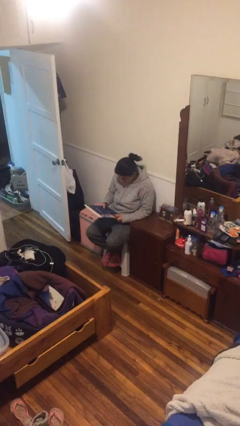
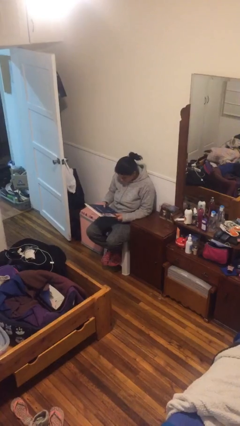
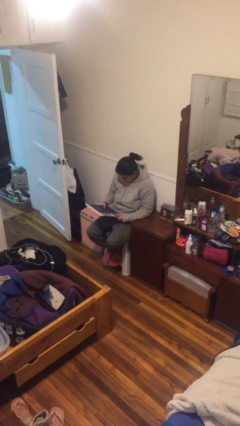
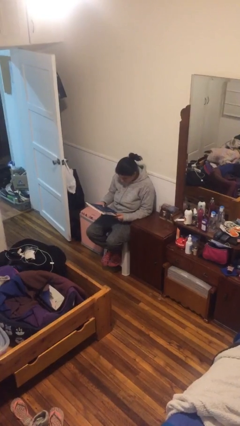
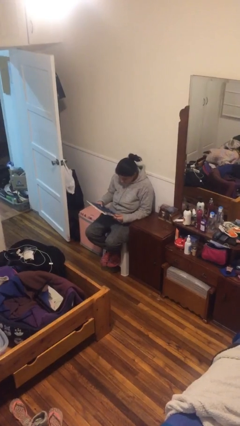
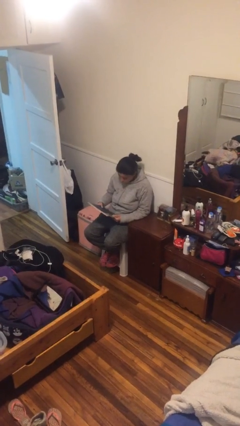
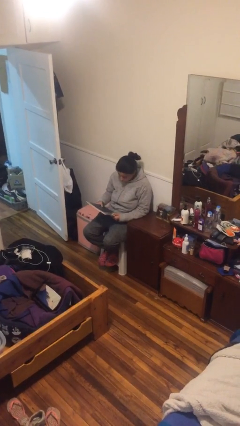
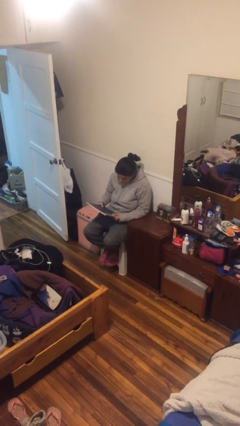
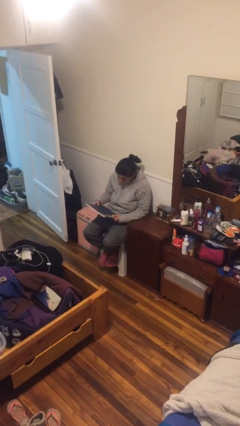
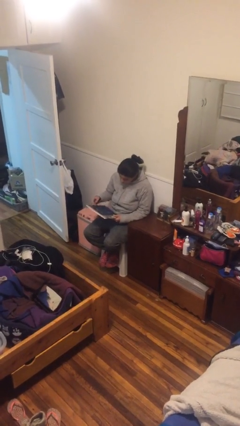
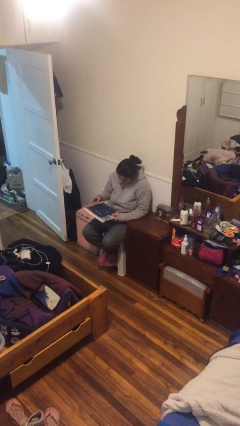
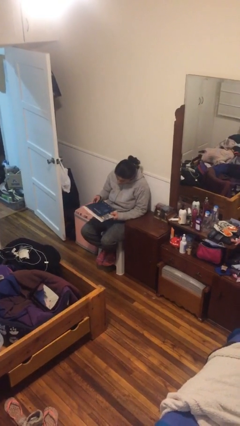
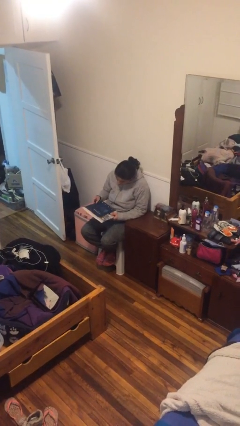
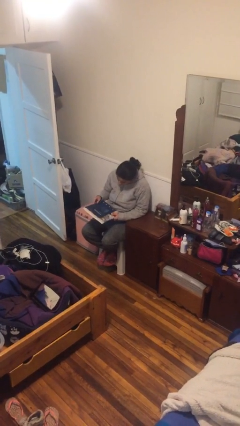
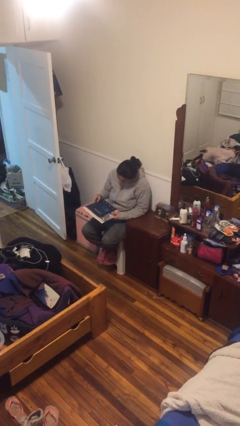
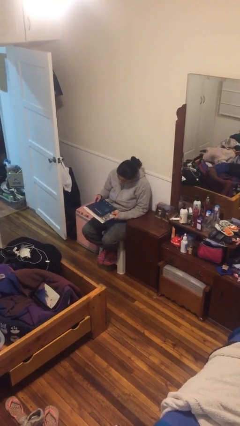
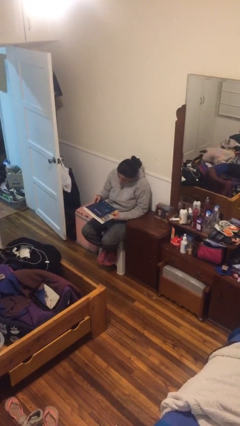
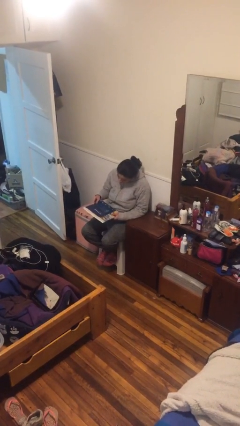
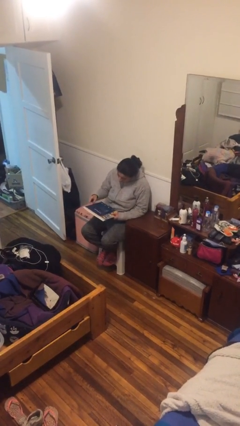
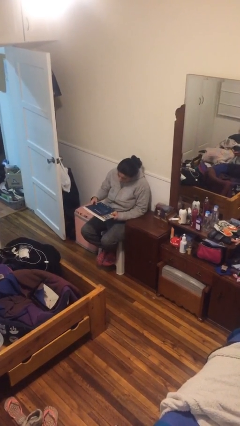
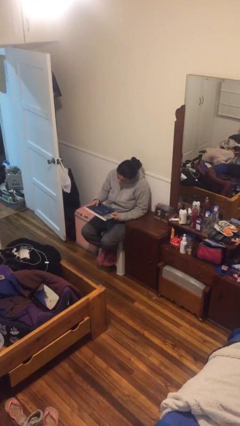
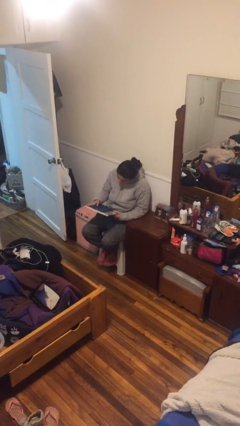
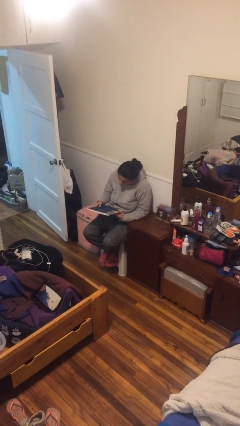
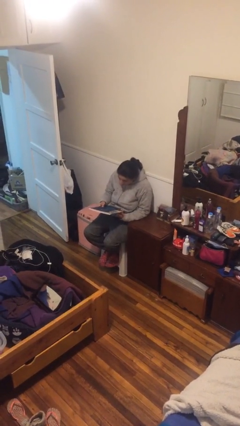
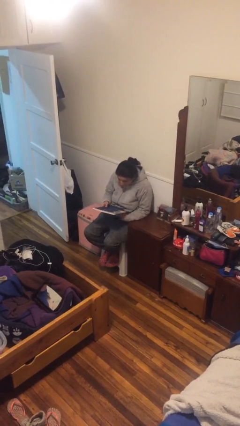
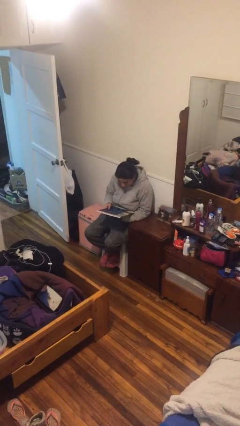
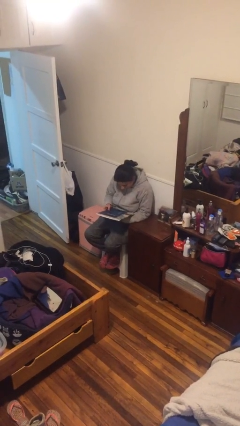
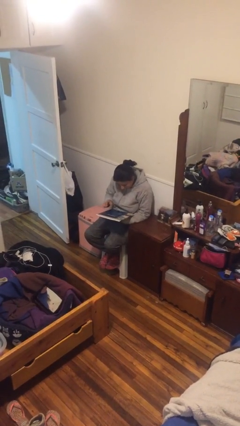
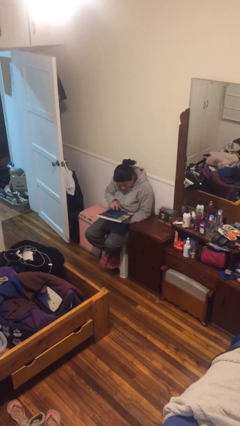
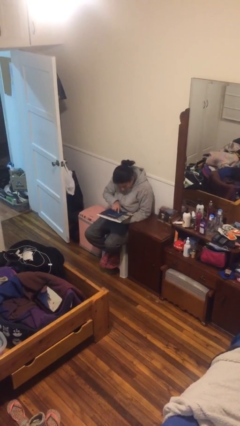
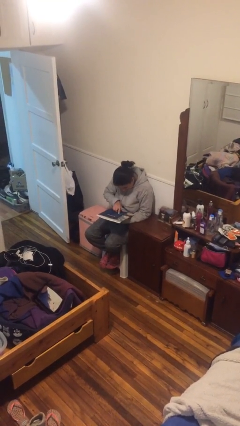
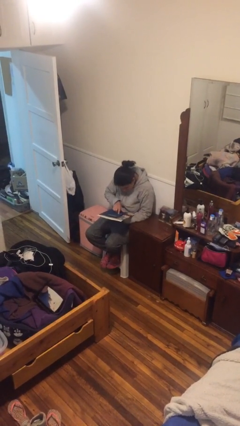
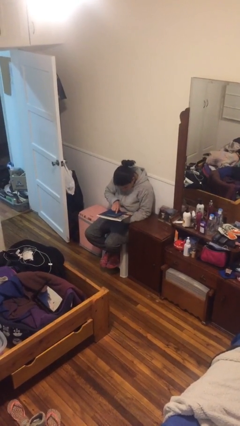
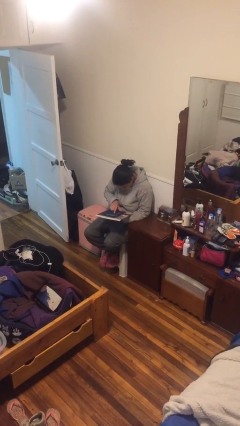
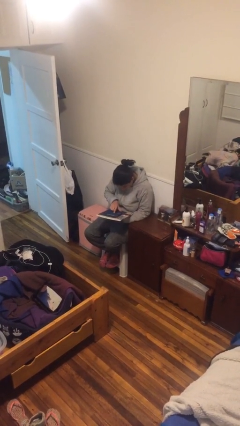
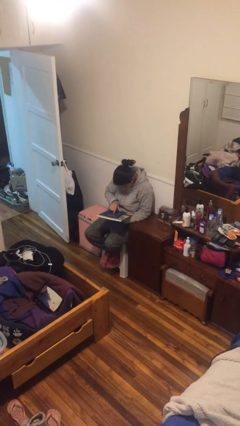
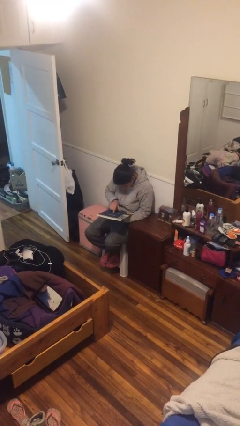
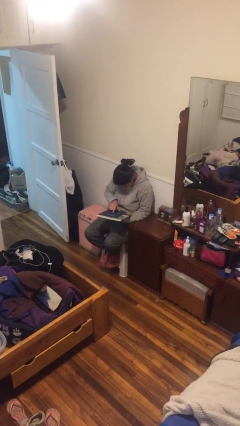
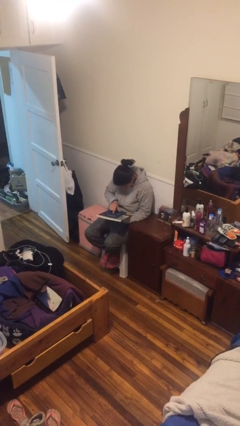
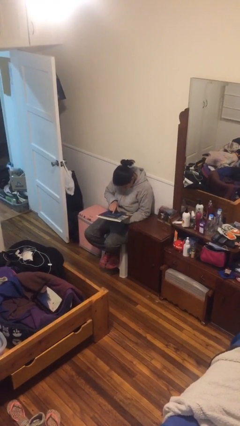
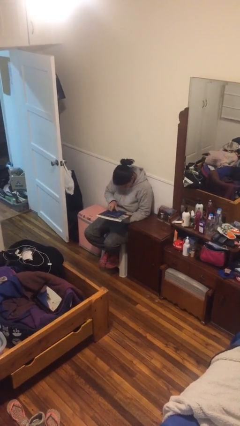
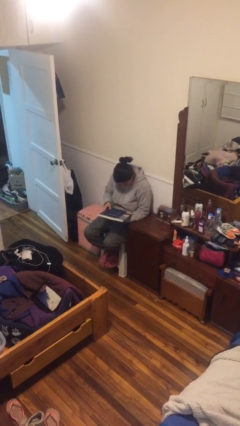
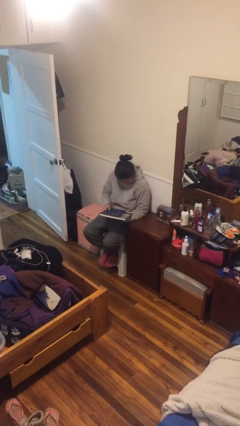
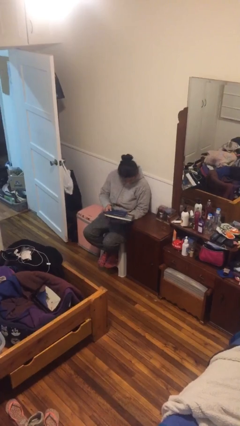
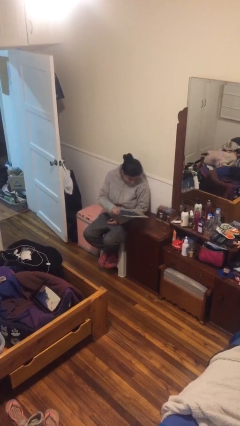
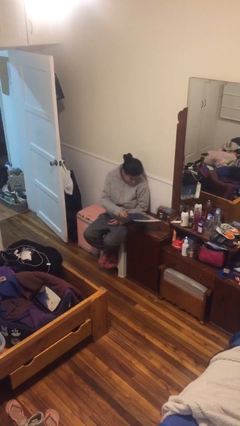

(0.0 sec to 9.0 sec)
person reads document

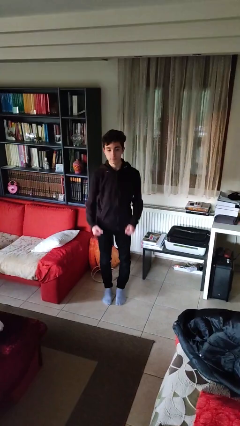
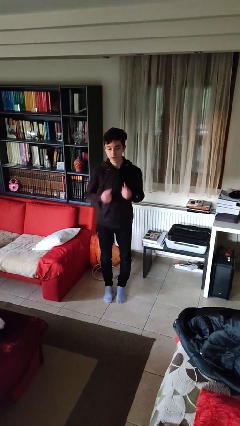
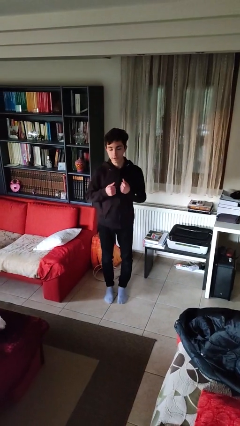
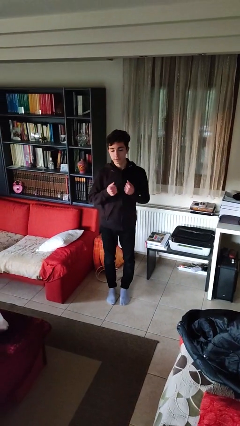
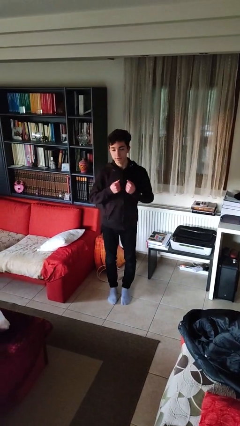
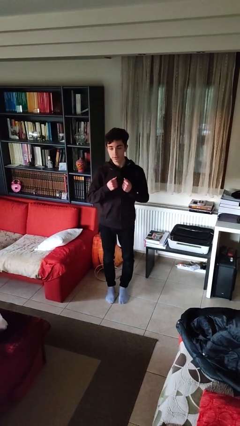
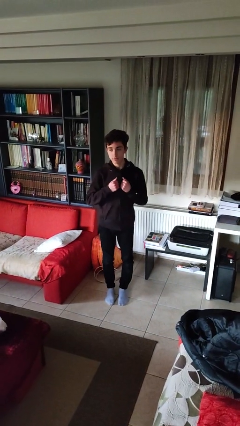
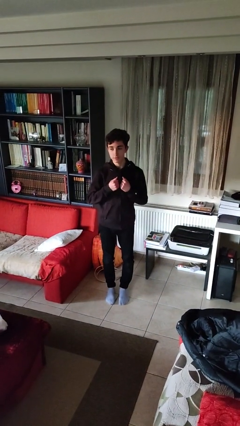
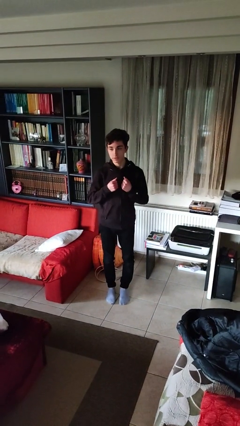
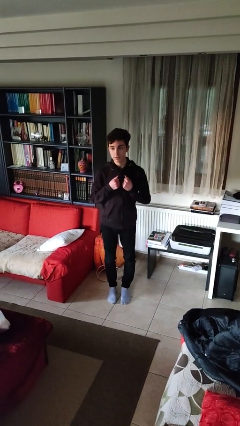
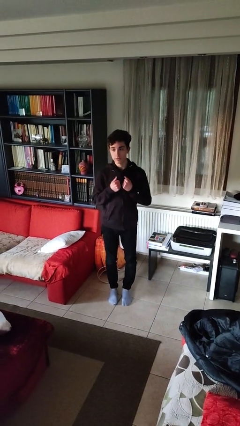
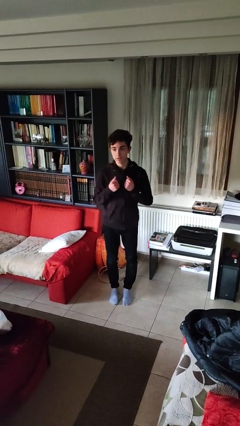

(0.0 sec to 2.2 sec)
person drums on chest

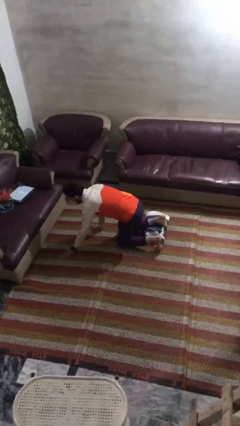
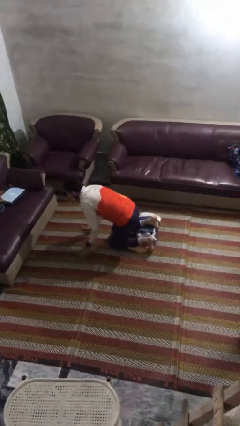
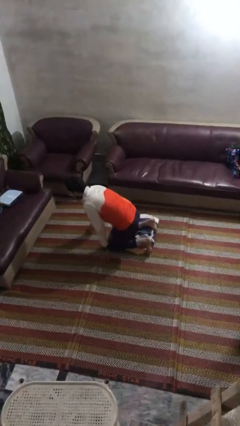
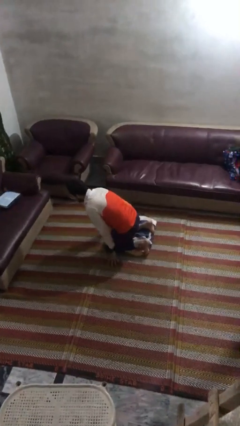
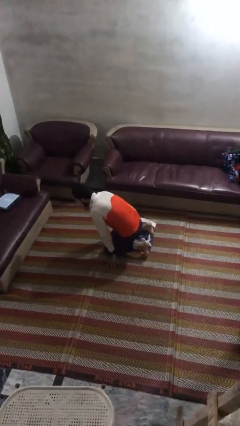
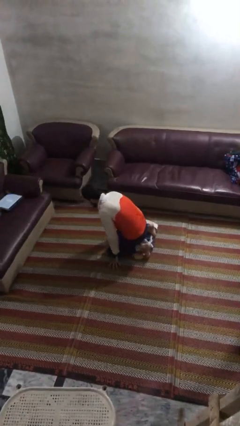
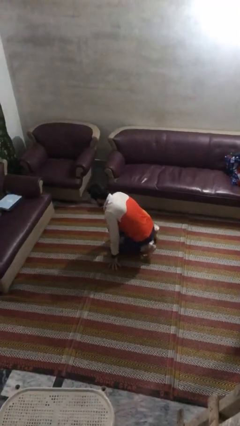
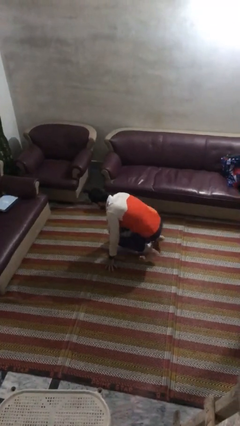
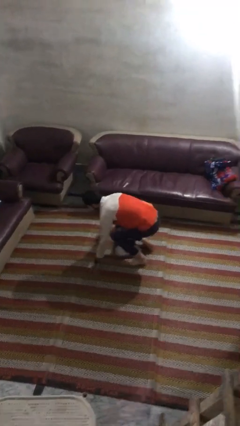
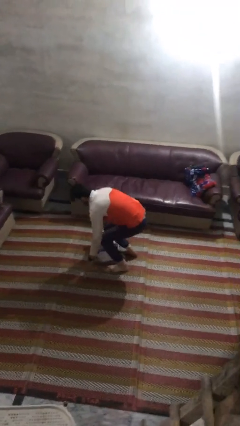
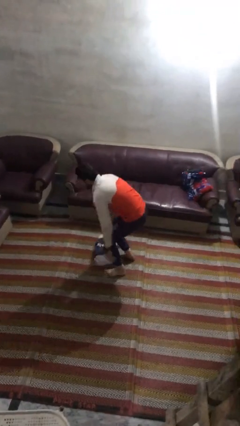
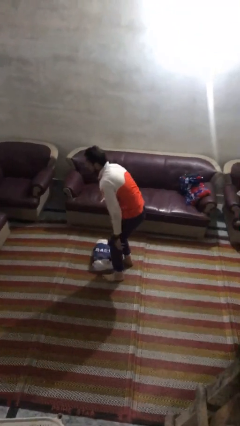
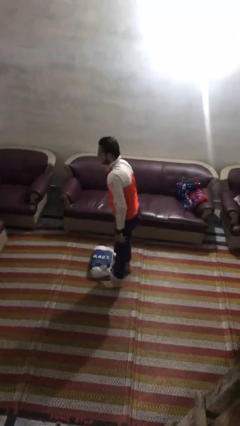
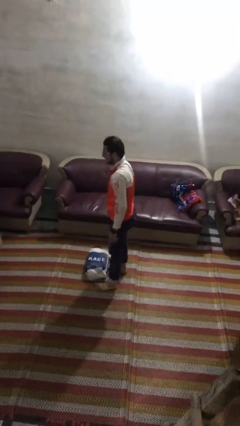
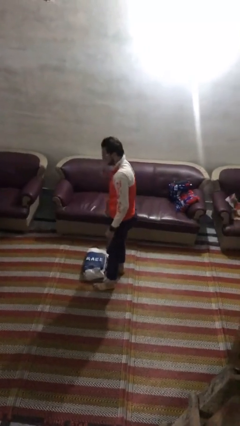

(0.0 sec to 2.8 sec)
person stands up from floor

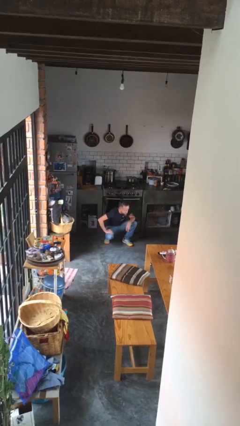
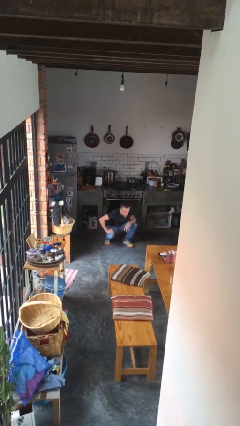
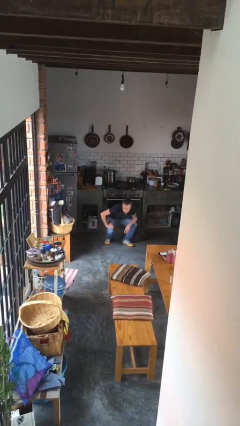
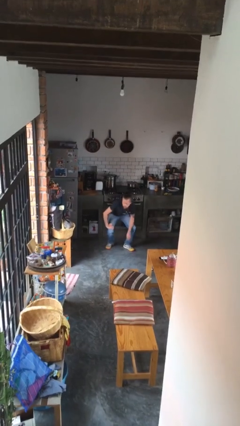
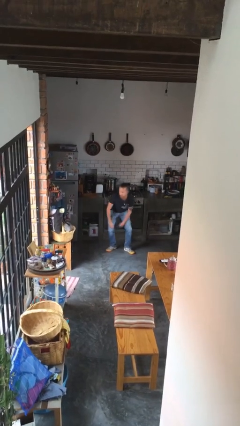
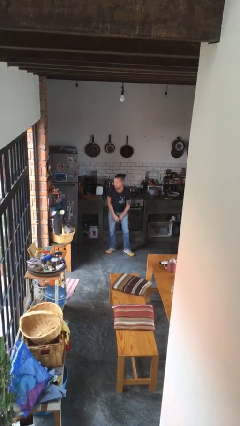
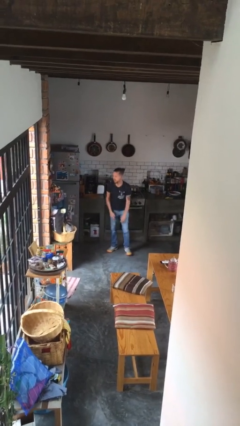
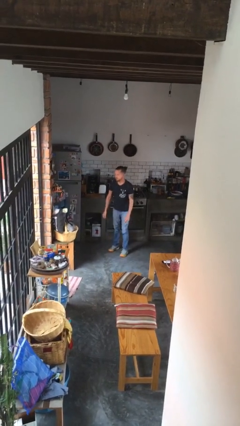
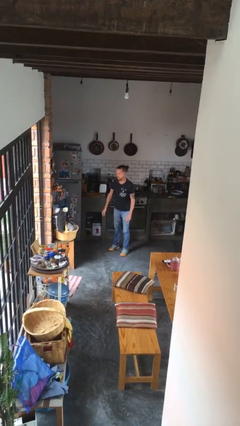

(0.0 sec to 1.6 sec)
person stands up

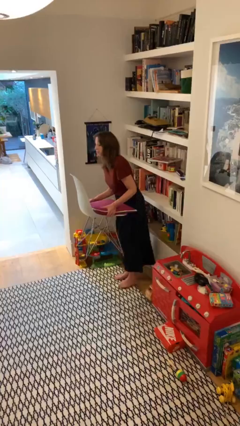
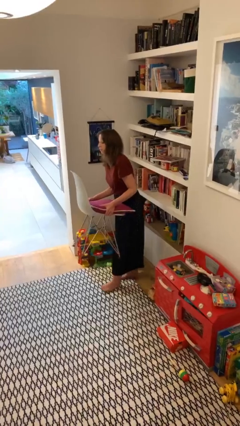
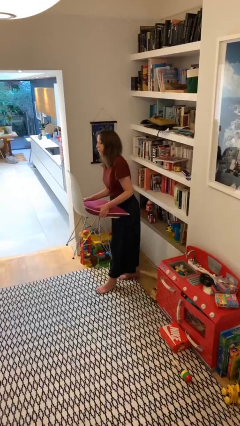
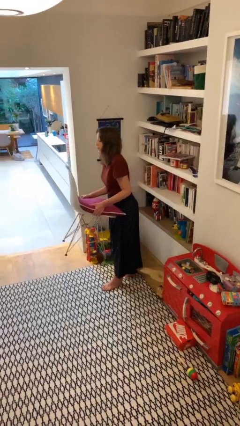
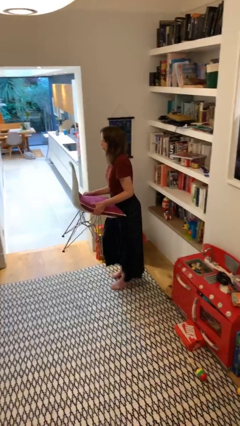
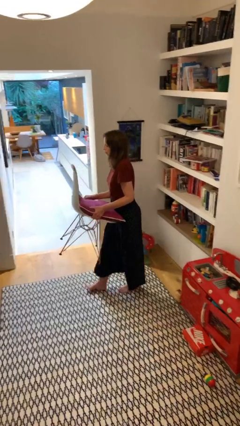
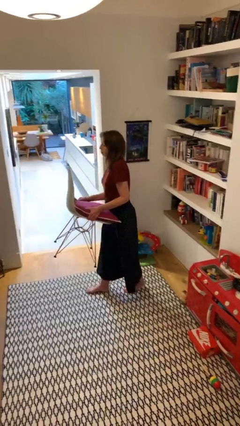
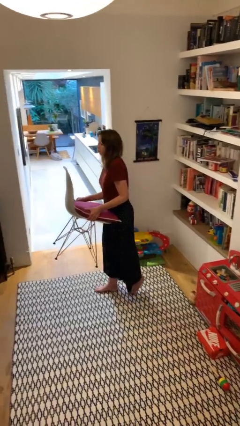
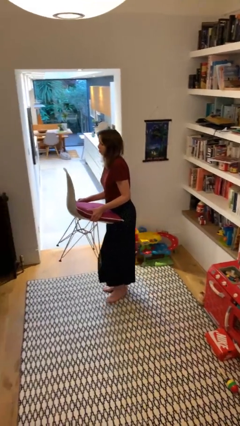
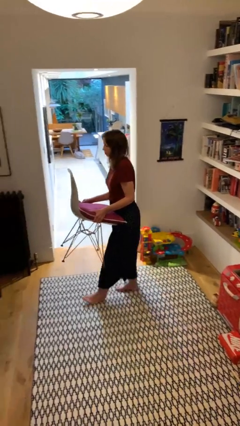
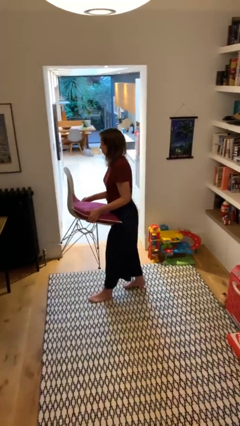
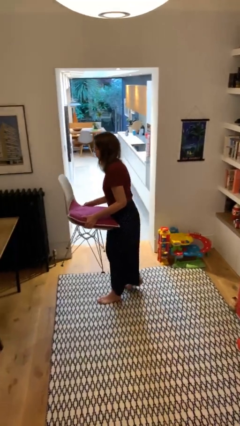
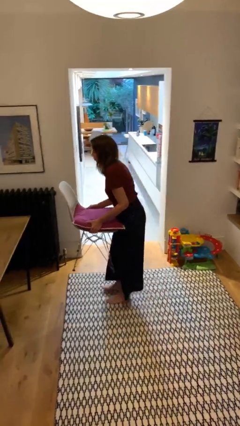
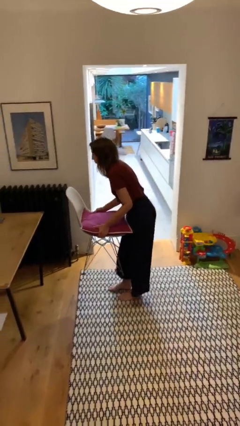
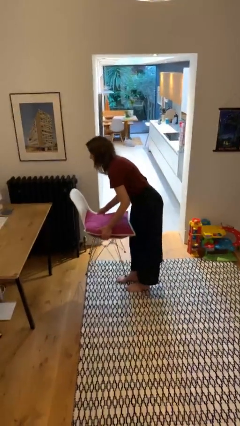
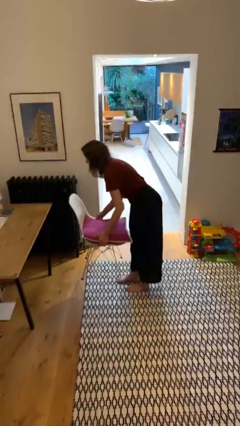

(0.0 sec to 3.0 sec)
person carries heavy object
